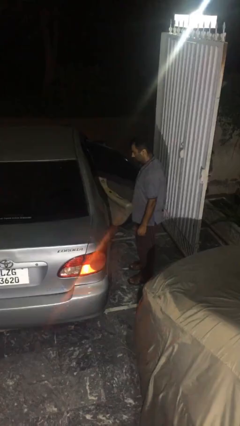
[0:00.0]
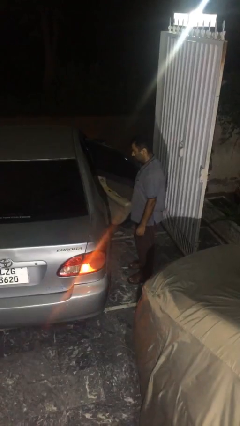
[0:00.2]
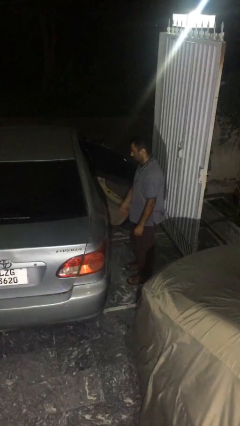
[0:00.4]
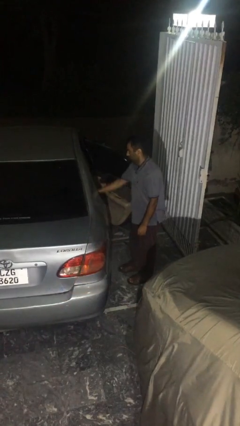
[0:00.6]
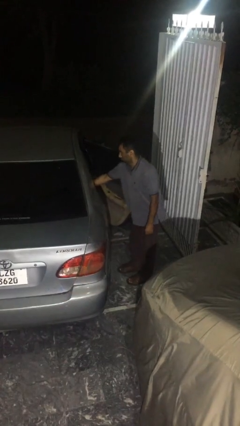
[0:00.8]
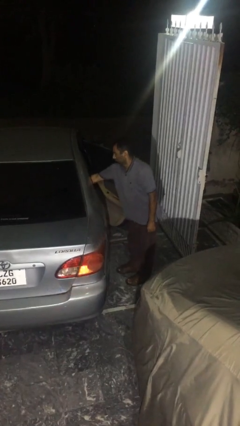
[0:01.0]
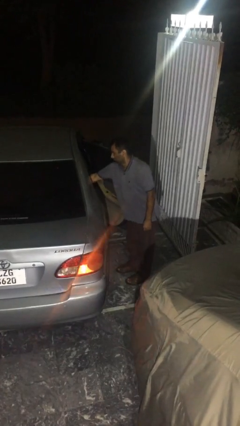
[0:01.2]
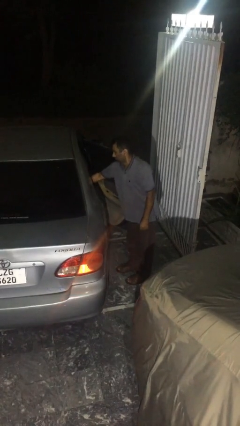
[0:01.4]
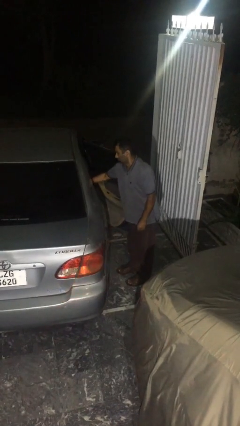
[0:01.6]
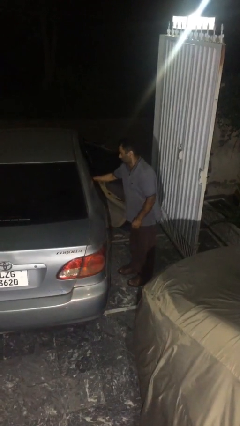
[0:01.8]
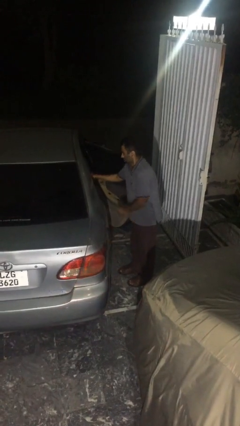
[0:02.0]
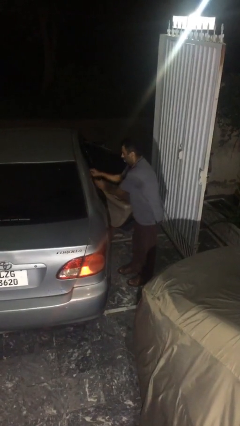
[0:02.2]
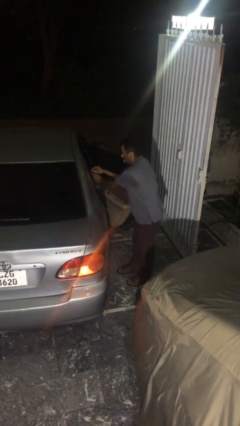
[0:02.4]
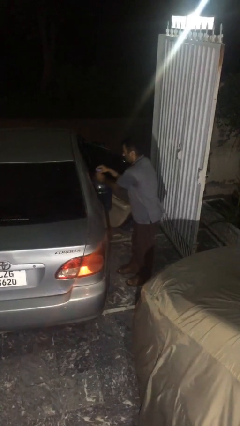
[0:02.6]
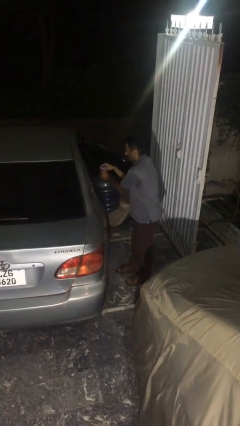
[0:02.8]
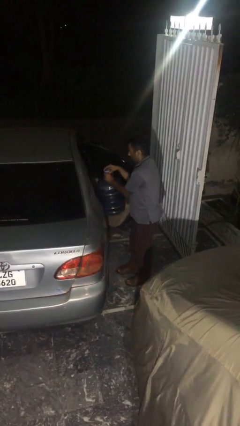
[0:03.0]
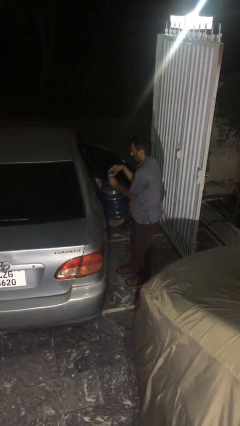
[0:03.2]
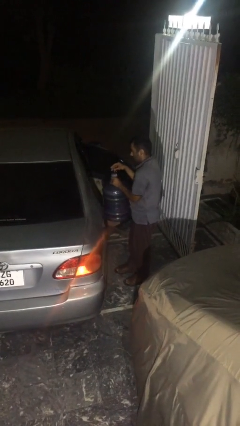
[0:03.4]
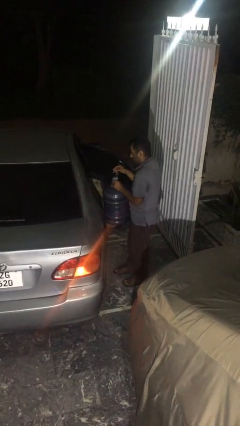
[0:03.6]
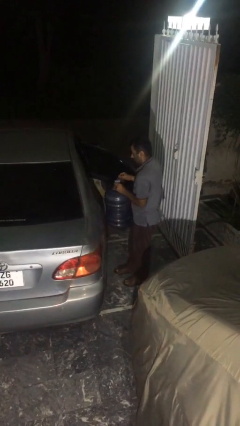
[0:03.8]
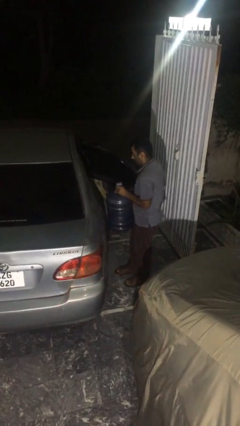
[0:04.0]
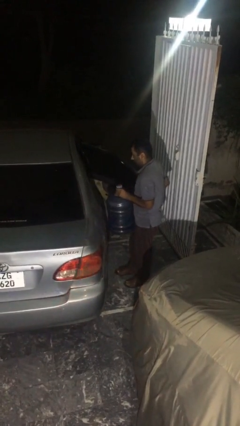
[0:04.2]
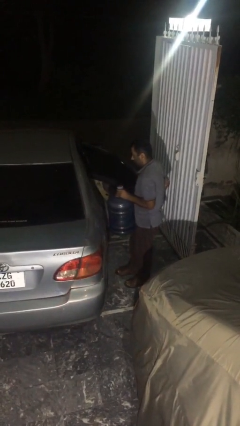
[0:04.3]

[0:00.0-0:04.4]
person unloads car

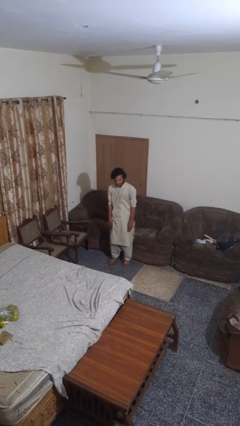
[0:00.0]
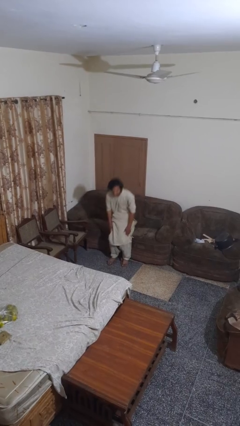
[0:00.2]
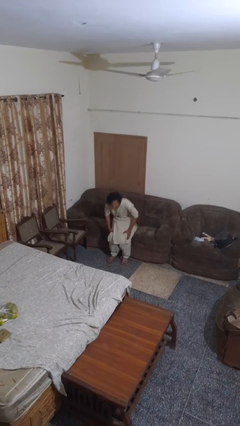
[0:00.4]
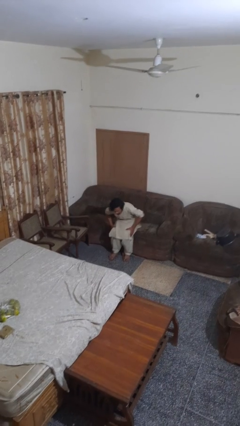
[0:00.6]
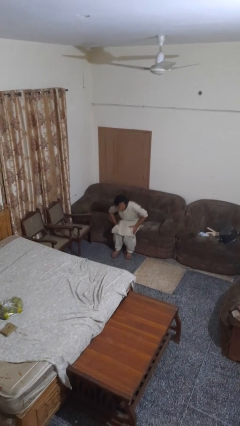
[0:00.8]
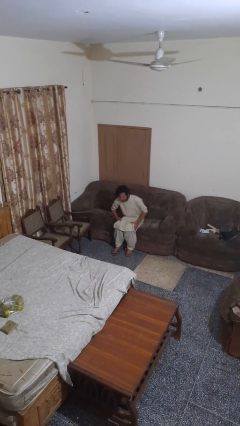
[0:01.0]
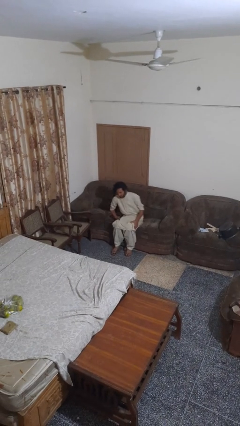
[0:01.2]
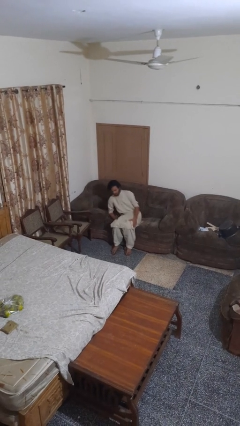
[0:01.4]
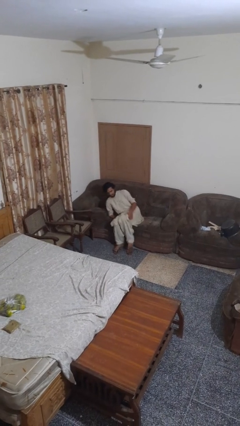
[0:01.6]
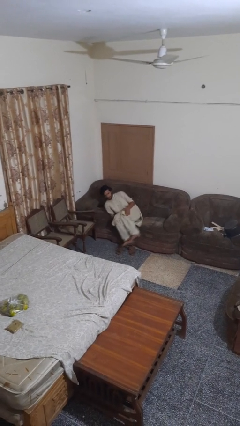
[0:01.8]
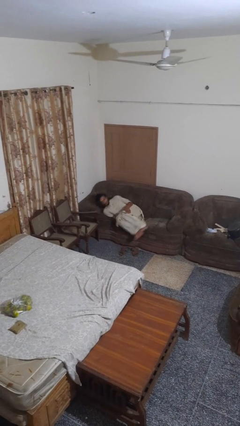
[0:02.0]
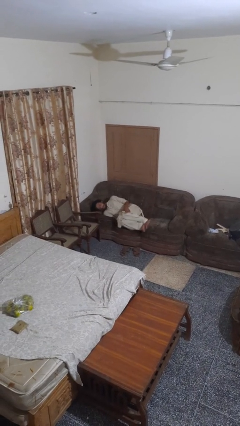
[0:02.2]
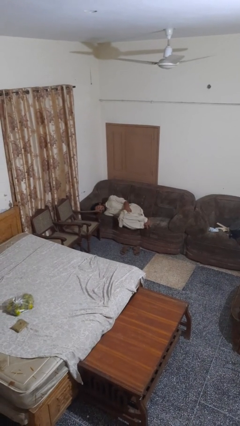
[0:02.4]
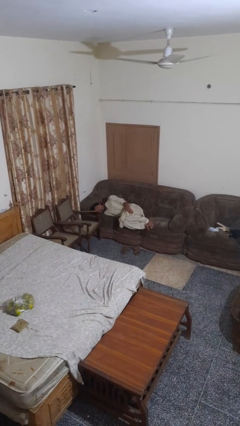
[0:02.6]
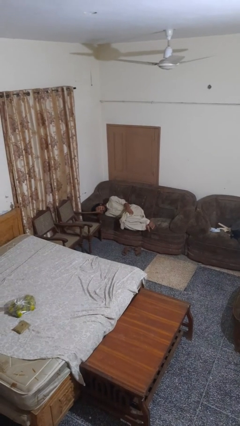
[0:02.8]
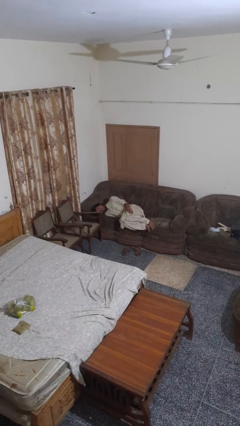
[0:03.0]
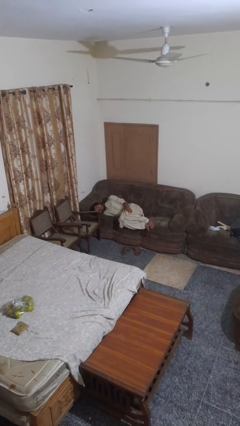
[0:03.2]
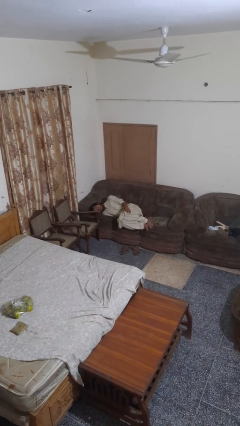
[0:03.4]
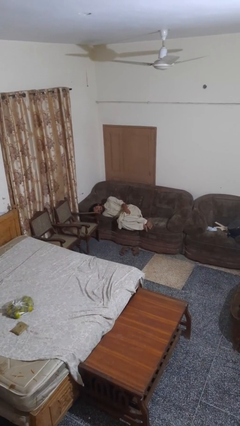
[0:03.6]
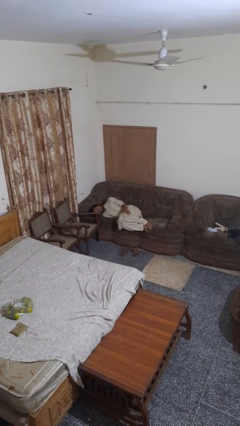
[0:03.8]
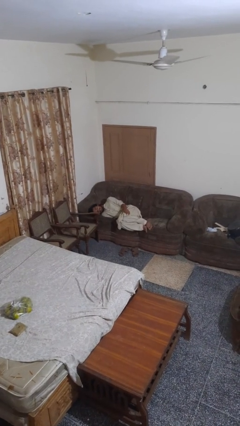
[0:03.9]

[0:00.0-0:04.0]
person lies down on couch

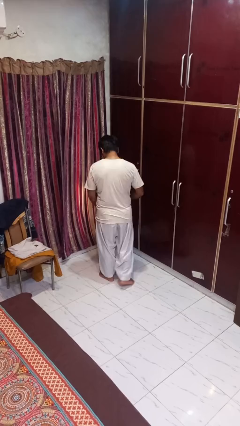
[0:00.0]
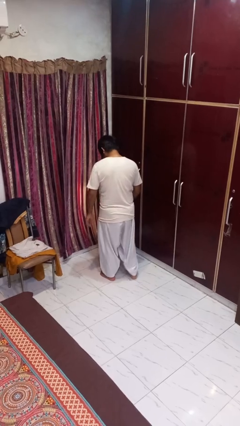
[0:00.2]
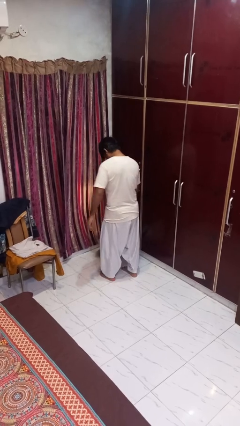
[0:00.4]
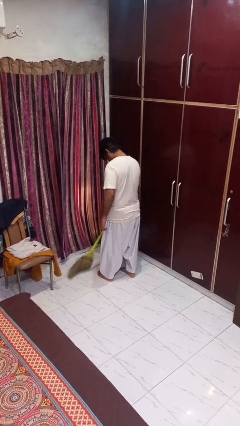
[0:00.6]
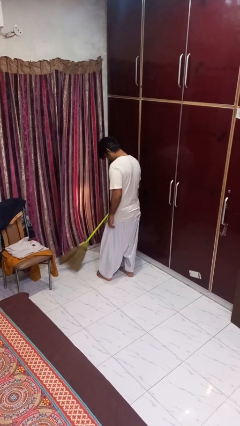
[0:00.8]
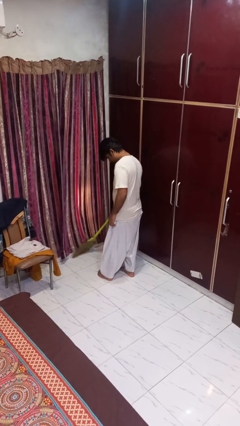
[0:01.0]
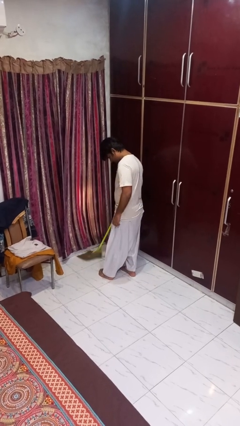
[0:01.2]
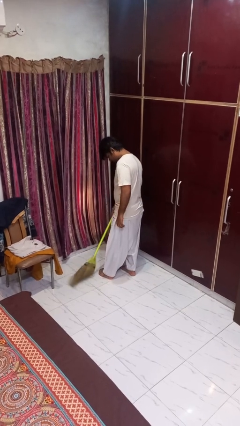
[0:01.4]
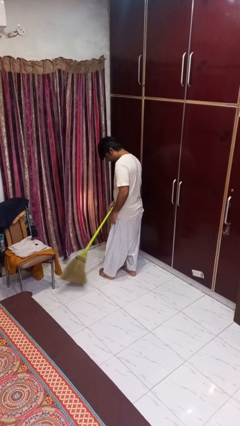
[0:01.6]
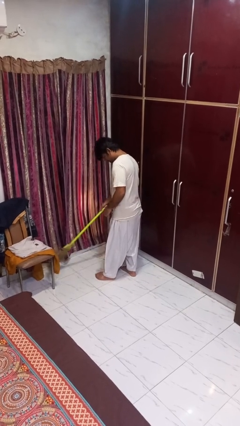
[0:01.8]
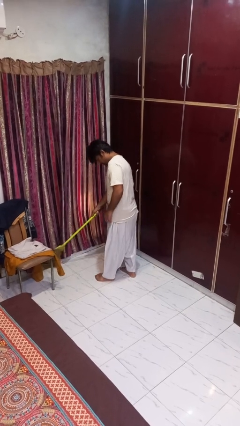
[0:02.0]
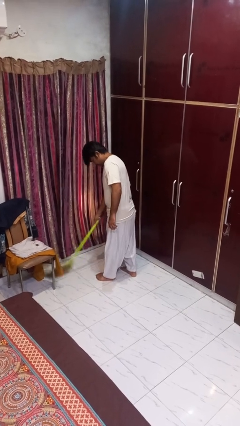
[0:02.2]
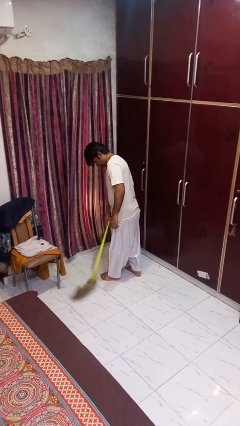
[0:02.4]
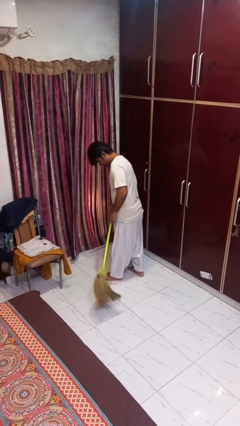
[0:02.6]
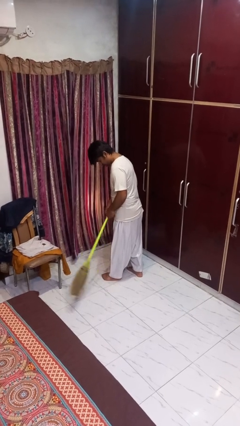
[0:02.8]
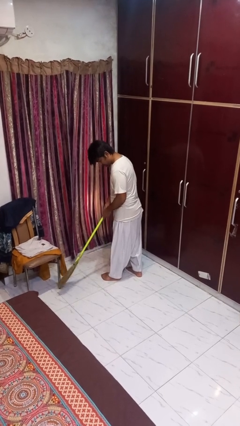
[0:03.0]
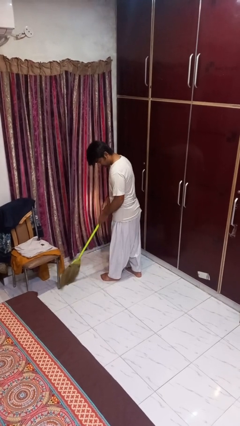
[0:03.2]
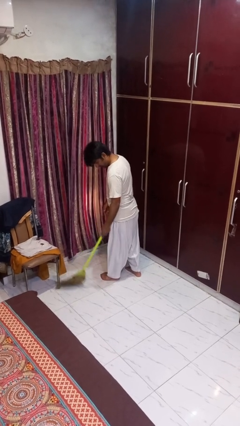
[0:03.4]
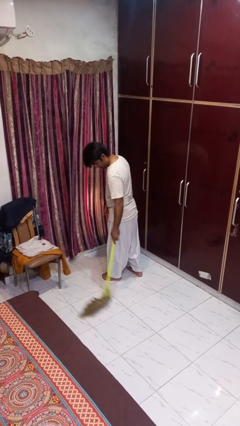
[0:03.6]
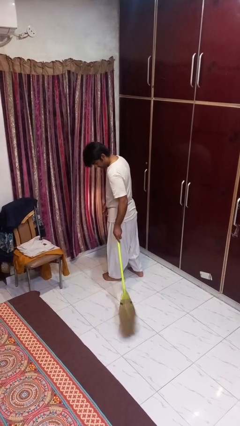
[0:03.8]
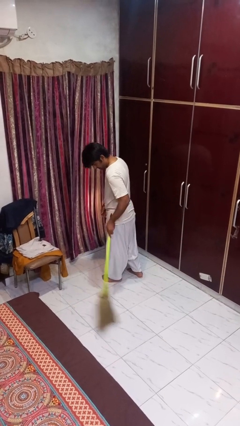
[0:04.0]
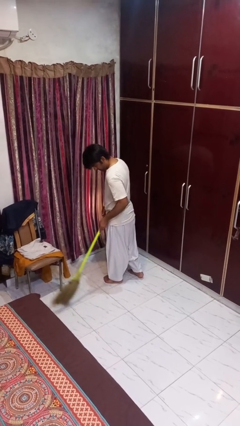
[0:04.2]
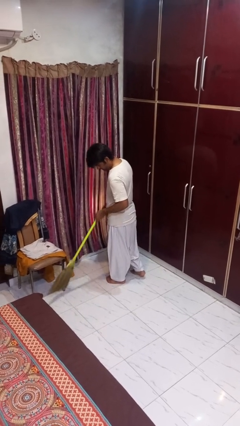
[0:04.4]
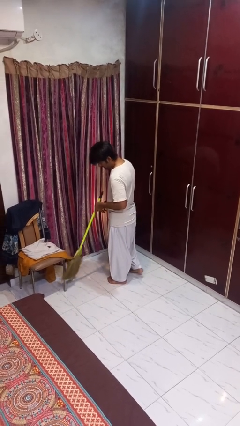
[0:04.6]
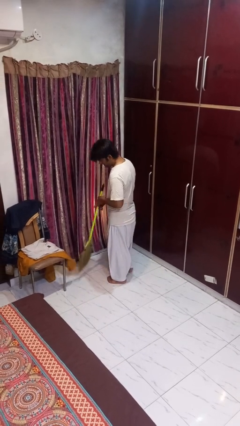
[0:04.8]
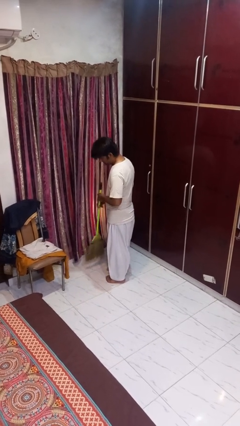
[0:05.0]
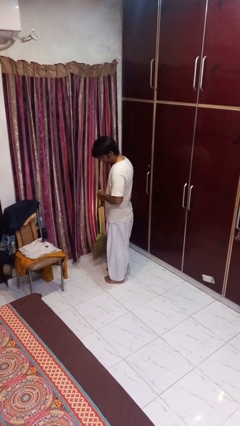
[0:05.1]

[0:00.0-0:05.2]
person sweeps floor

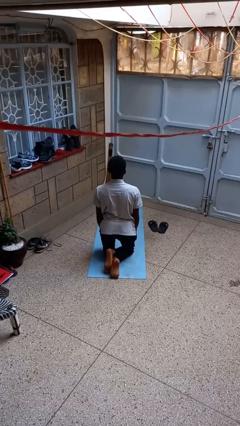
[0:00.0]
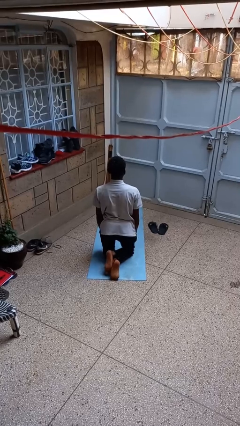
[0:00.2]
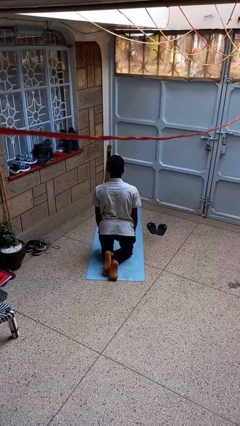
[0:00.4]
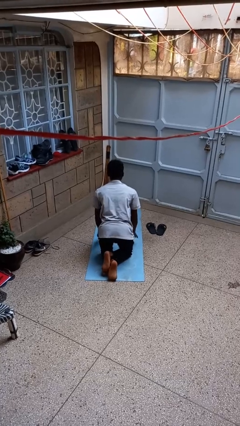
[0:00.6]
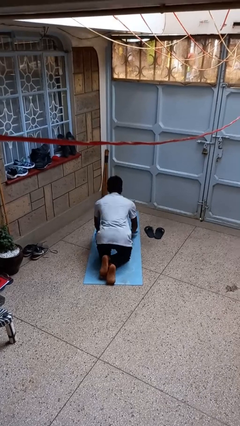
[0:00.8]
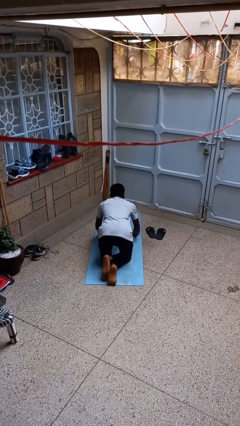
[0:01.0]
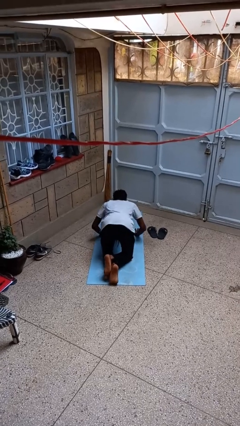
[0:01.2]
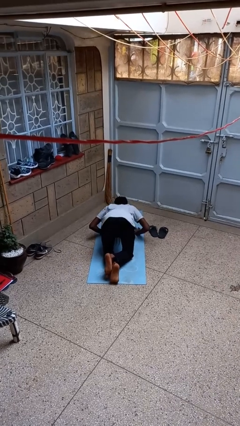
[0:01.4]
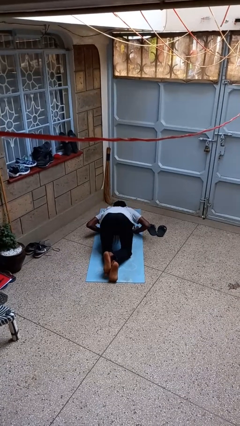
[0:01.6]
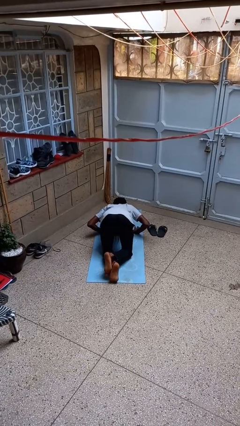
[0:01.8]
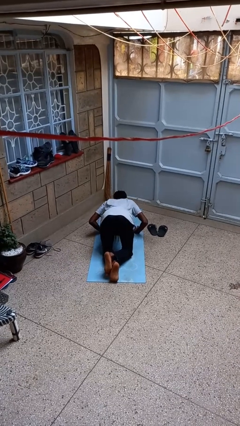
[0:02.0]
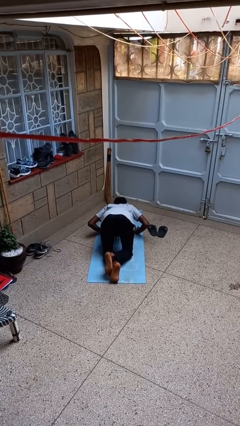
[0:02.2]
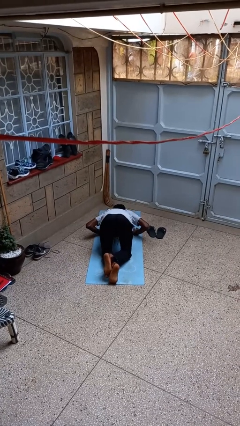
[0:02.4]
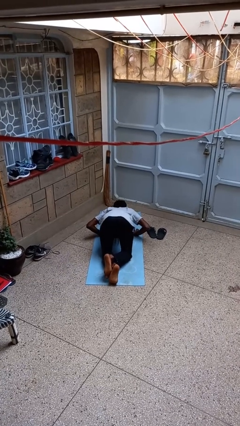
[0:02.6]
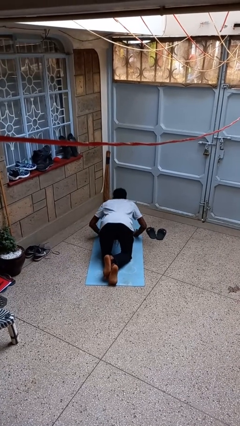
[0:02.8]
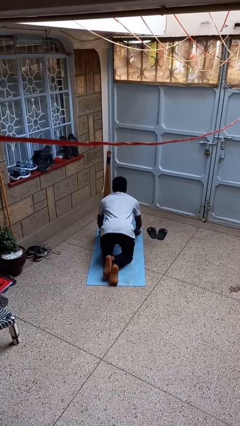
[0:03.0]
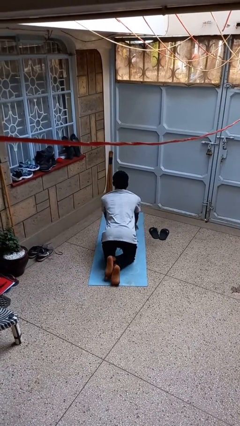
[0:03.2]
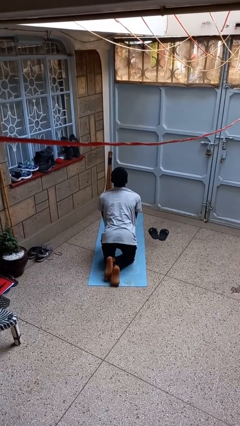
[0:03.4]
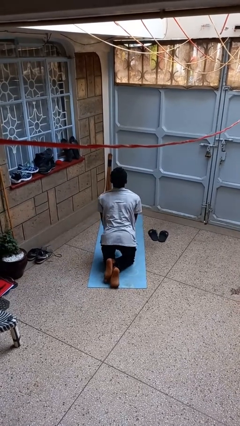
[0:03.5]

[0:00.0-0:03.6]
person exercises with pushup

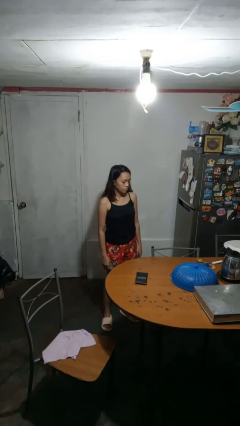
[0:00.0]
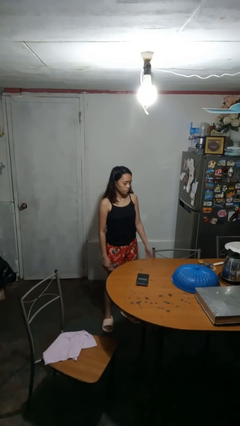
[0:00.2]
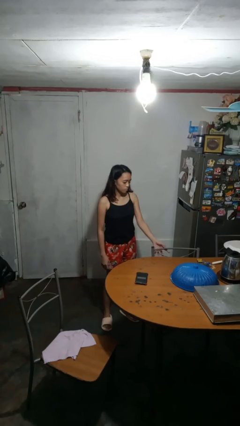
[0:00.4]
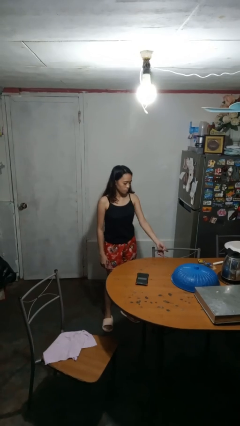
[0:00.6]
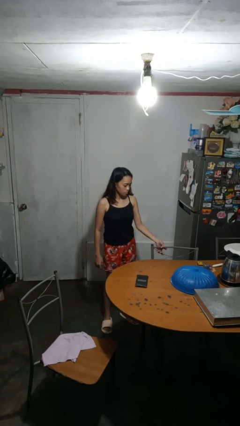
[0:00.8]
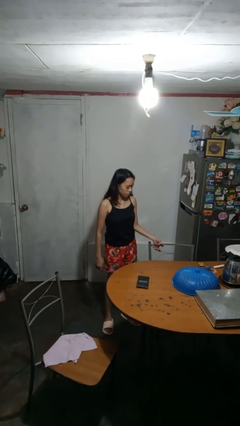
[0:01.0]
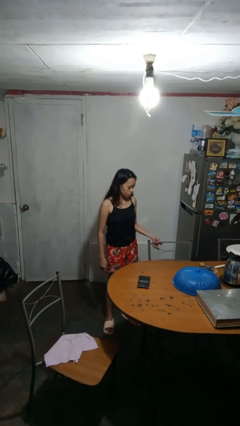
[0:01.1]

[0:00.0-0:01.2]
person pulls out chair
